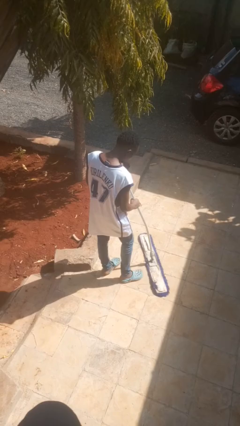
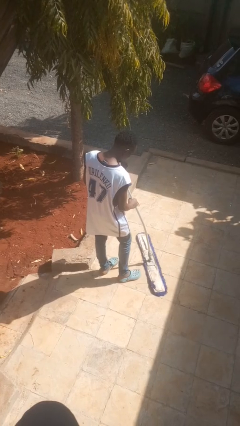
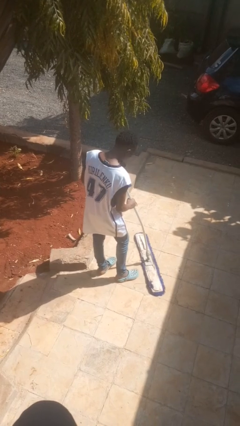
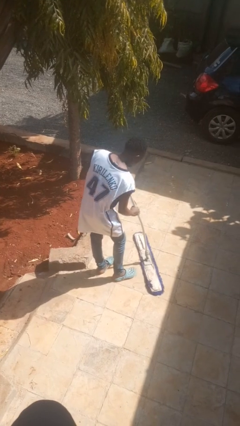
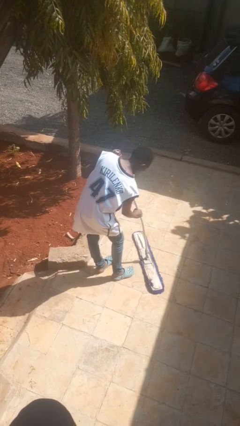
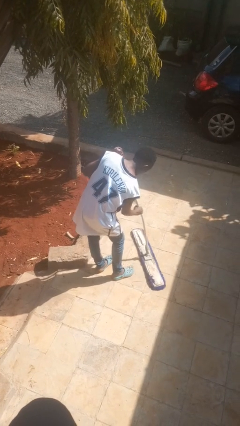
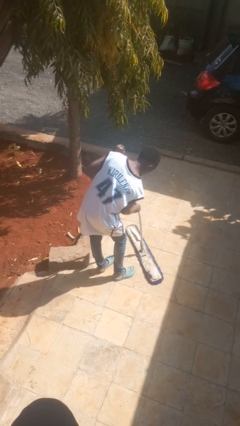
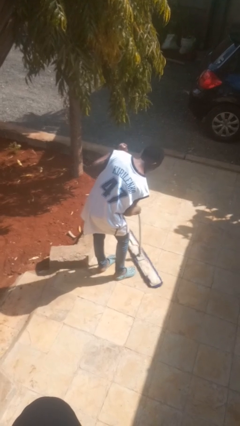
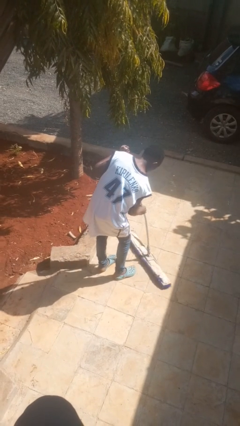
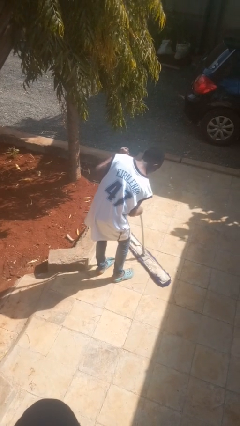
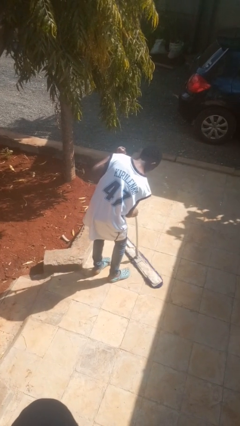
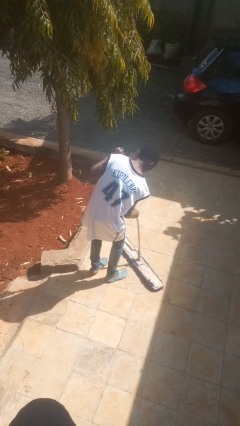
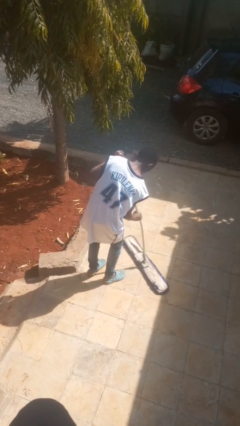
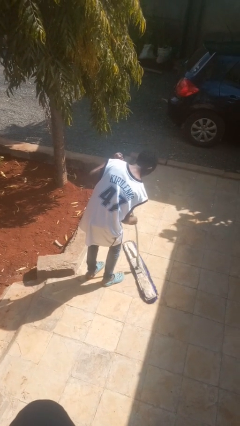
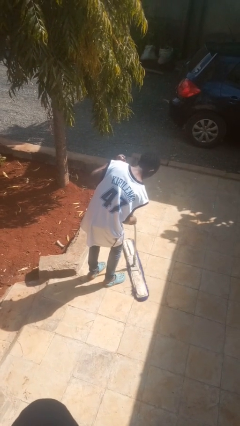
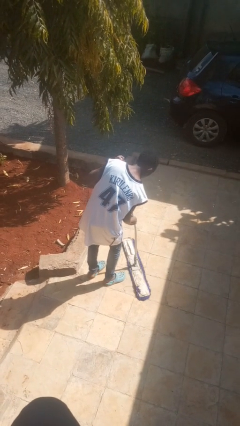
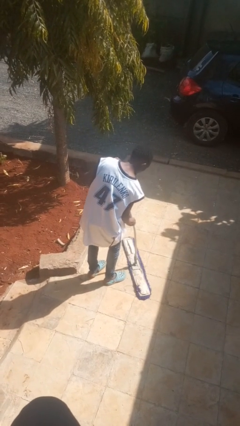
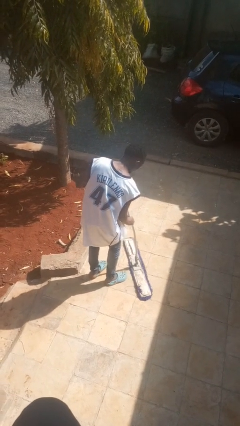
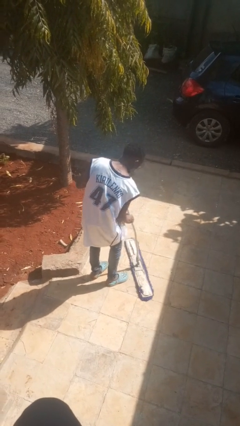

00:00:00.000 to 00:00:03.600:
person mops

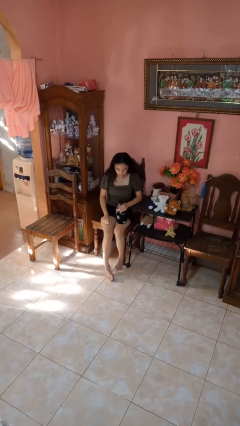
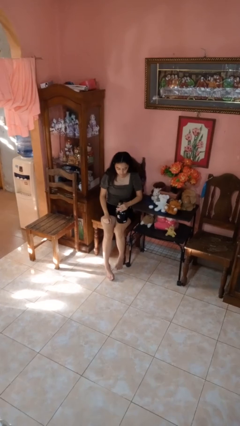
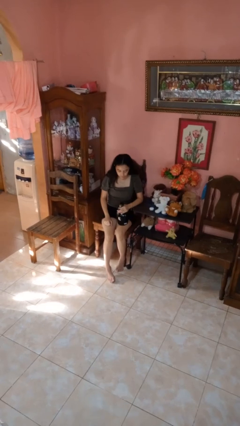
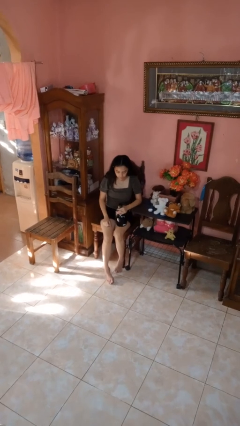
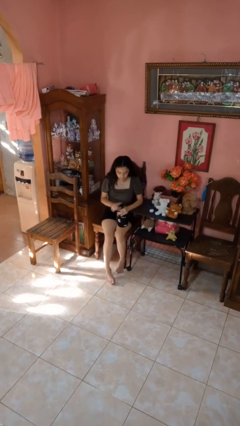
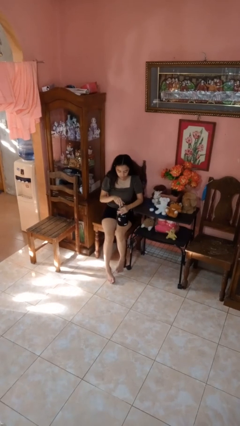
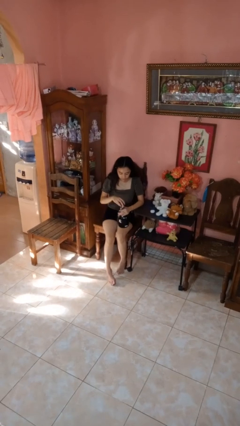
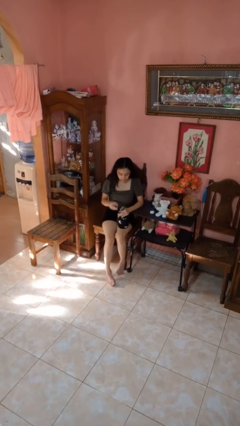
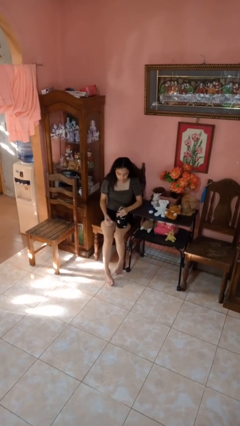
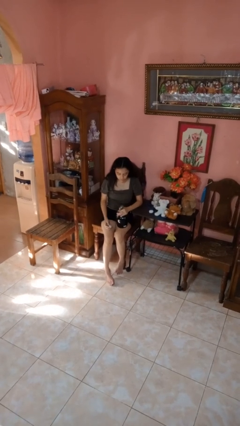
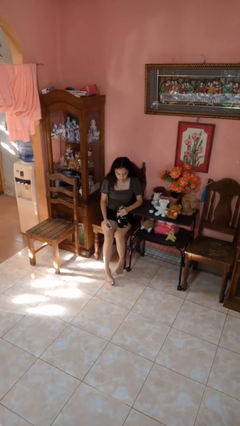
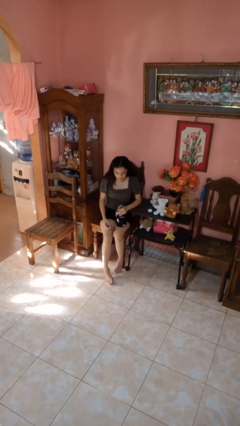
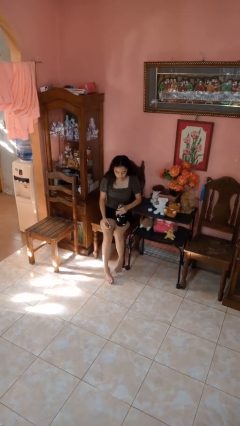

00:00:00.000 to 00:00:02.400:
person unscrews lid from bottle

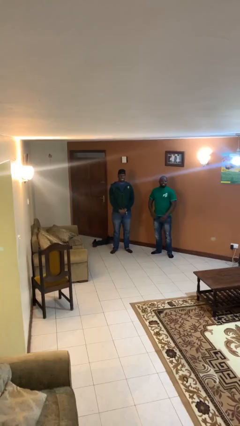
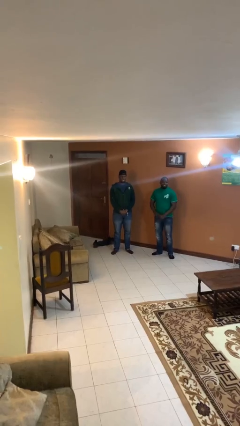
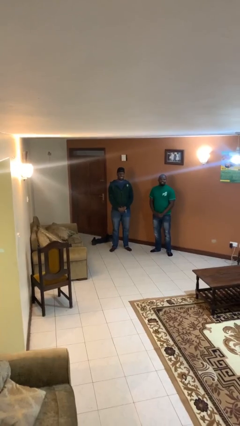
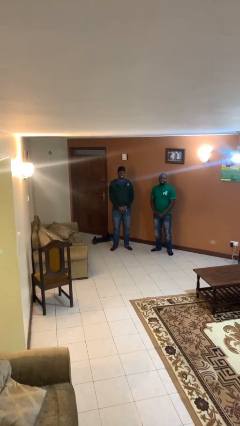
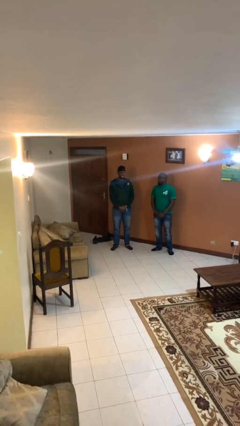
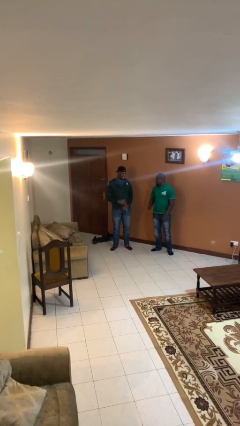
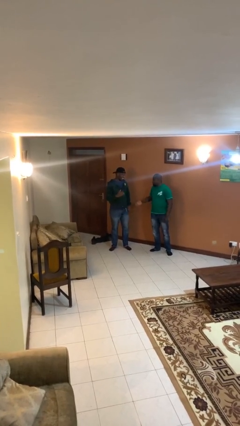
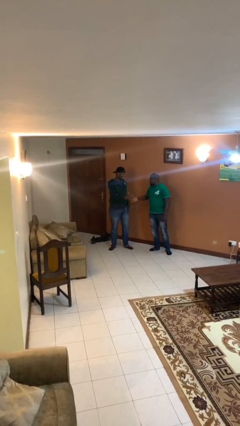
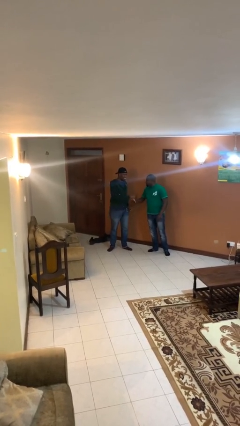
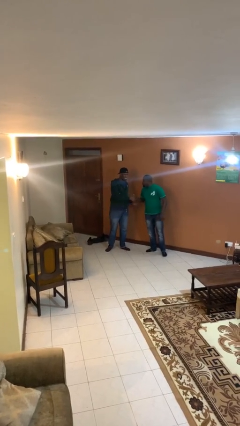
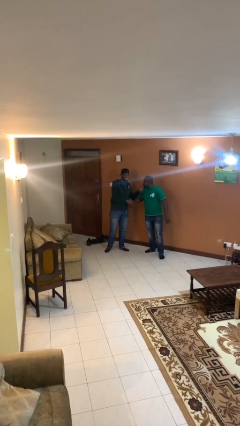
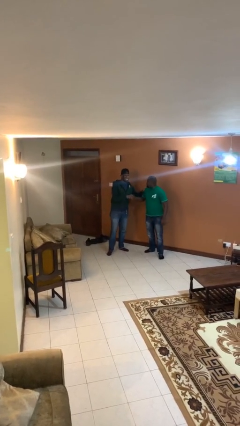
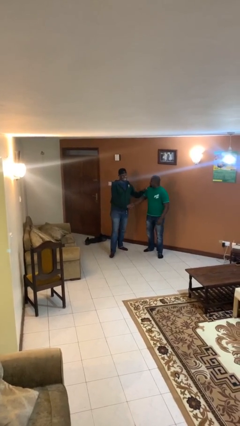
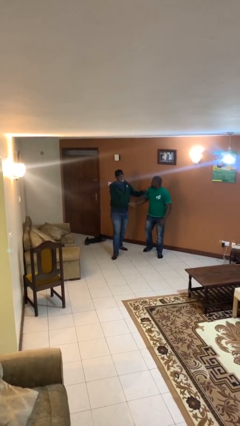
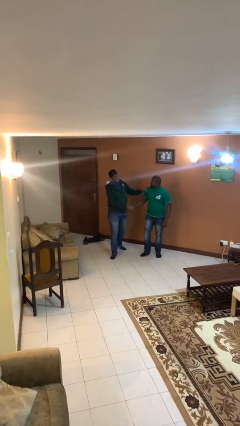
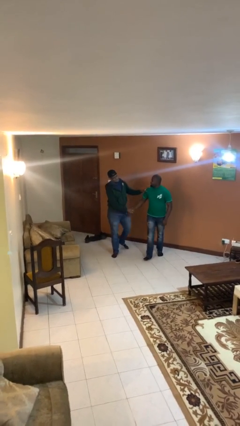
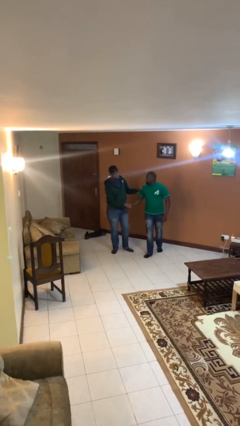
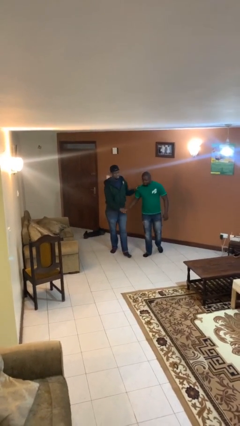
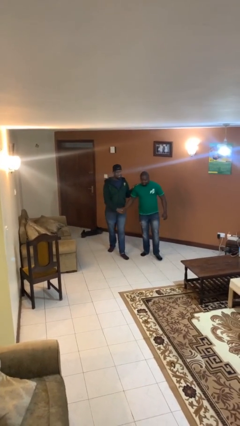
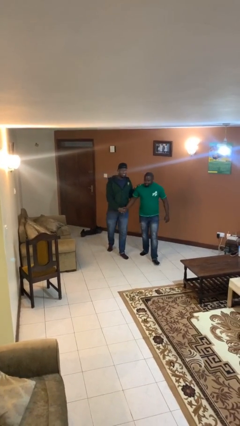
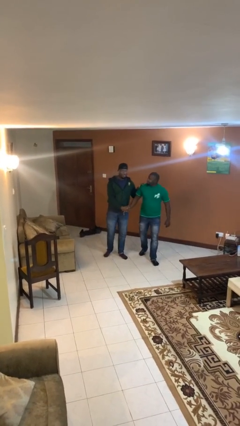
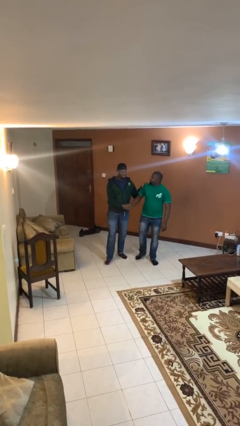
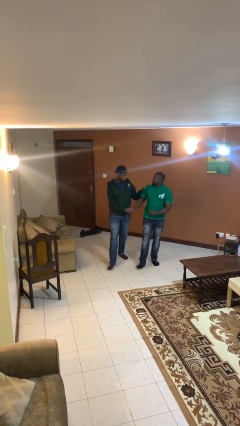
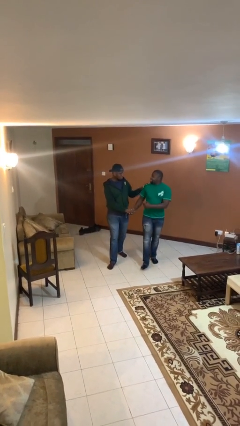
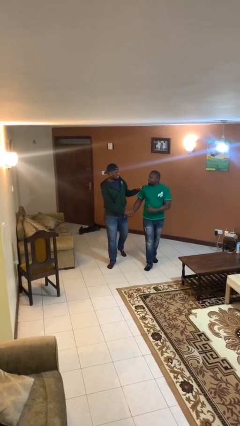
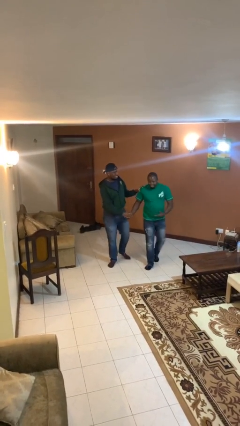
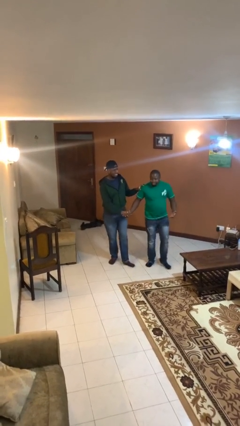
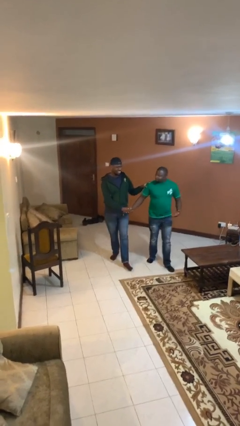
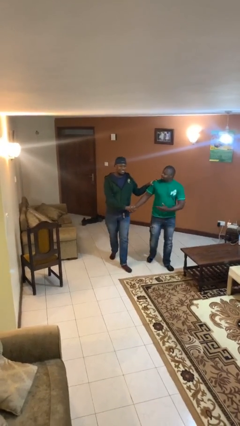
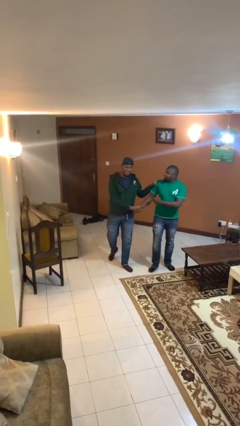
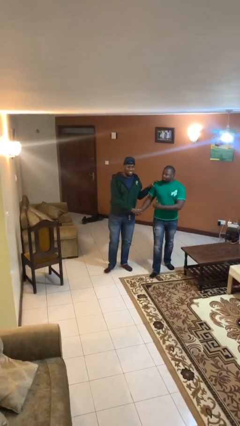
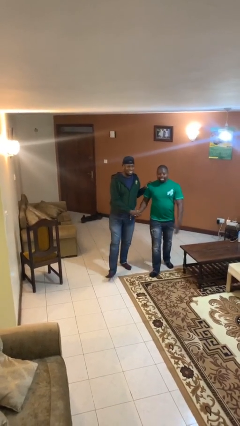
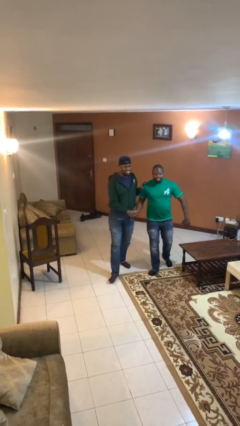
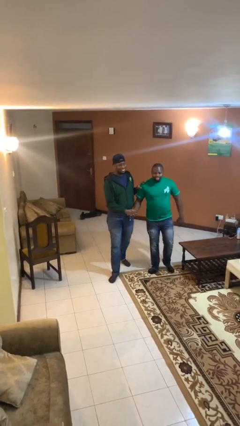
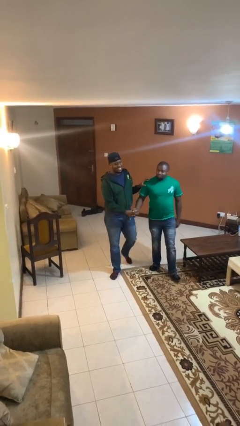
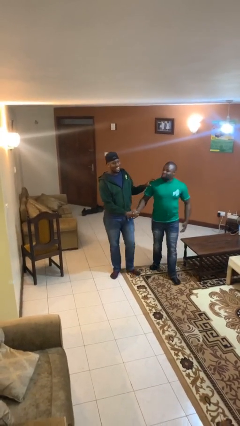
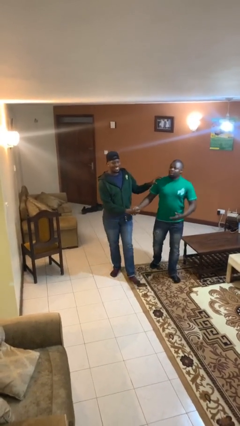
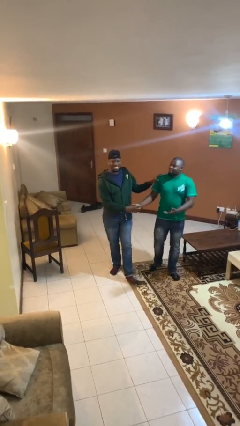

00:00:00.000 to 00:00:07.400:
person holds hand

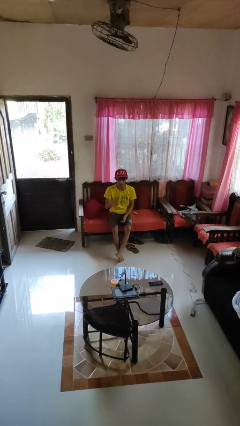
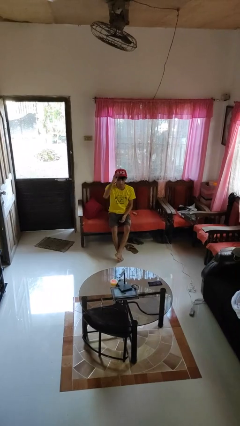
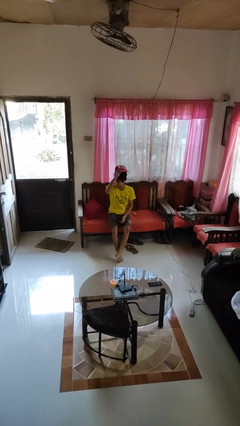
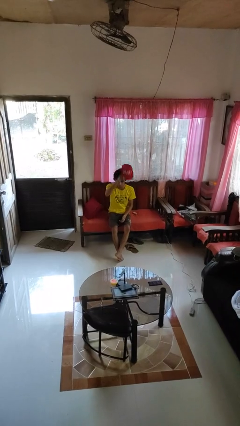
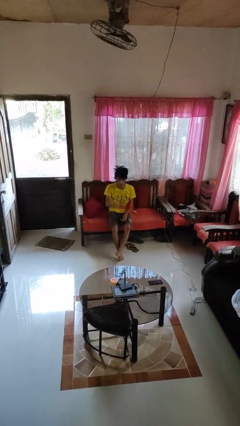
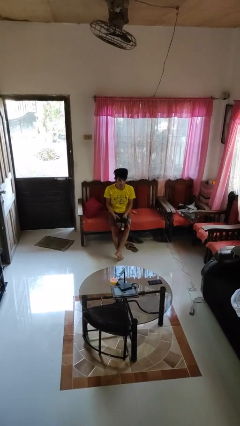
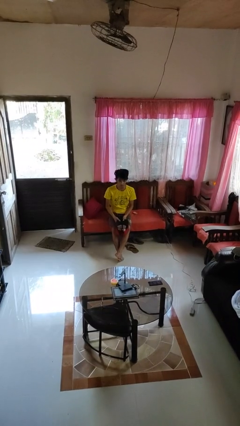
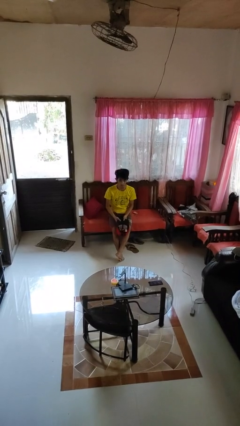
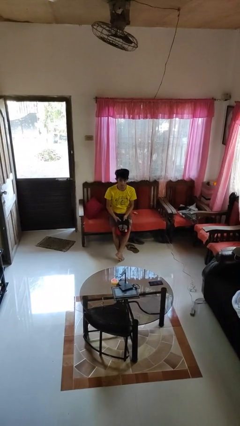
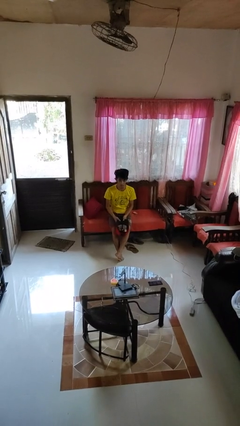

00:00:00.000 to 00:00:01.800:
person takes off hat

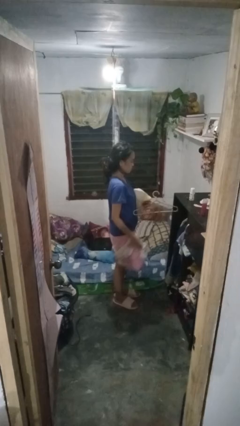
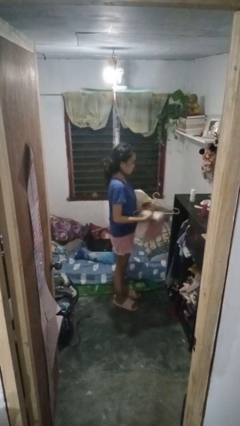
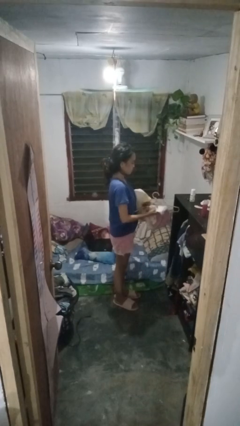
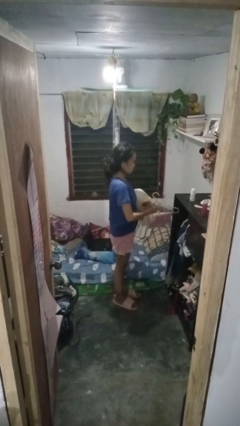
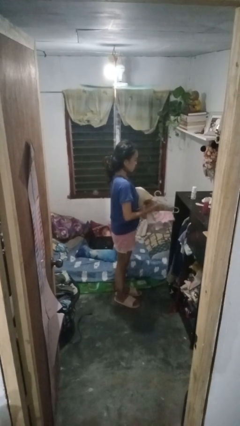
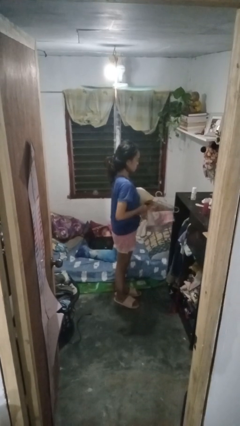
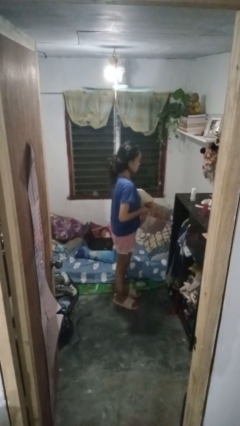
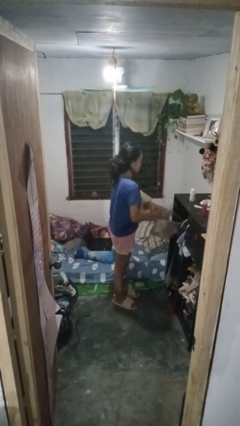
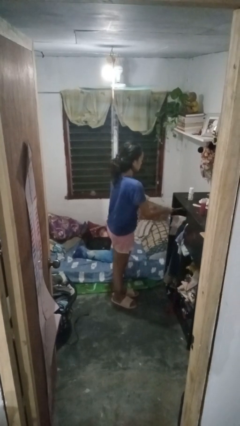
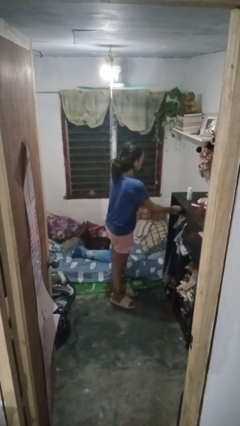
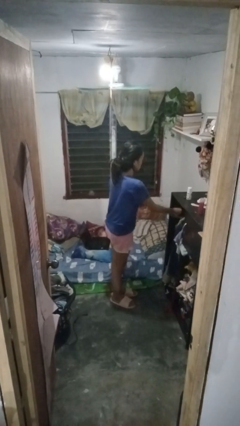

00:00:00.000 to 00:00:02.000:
person puts clothes into closet

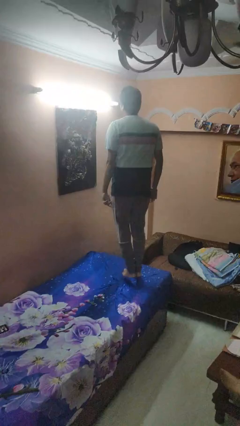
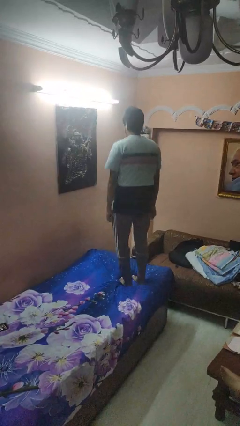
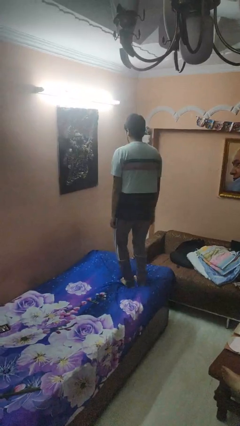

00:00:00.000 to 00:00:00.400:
person jumps on bed
